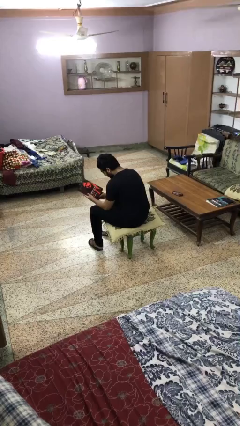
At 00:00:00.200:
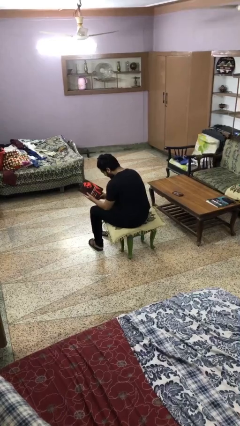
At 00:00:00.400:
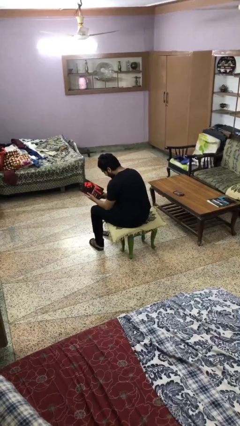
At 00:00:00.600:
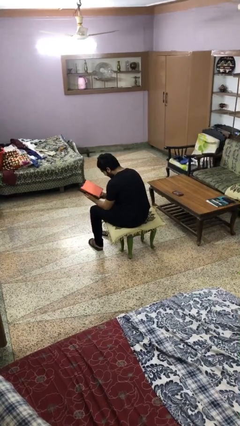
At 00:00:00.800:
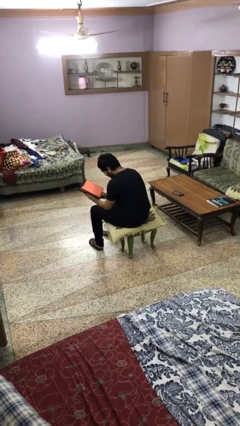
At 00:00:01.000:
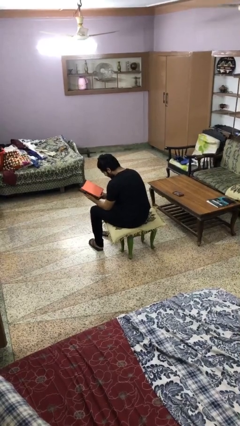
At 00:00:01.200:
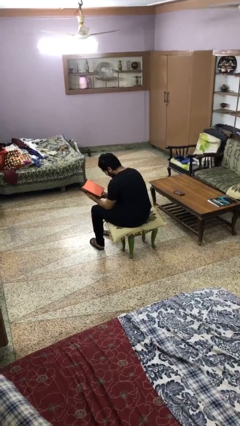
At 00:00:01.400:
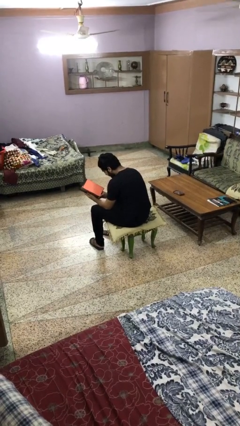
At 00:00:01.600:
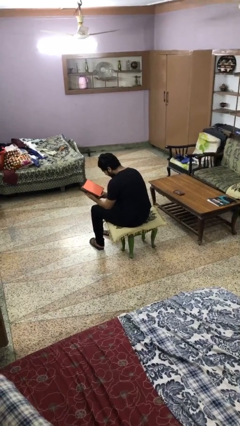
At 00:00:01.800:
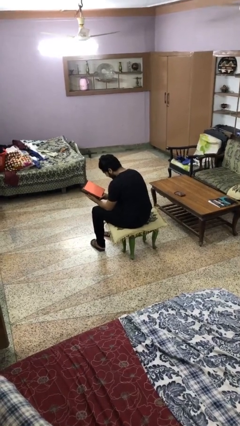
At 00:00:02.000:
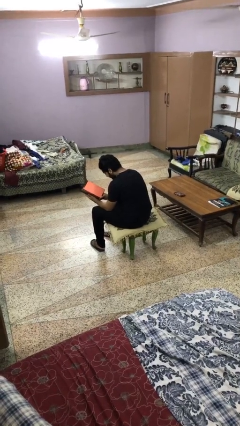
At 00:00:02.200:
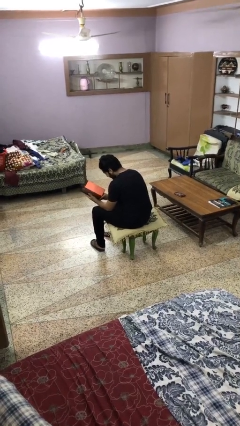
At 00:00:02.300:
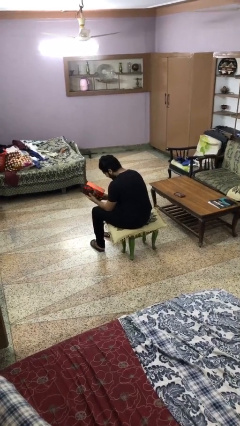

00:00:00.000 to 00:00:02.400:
person reads magazine

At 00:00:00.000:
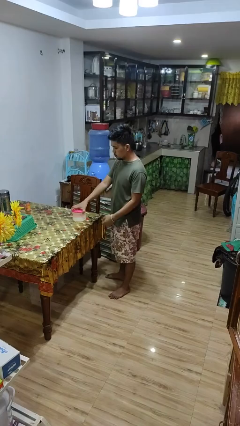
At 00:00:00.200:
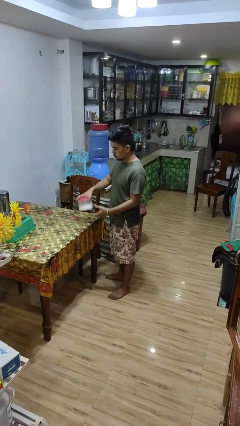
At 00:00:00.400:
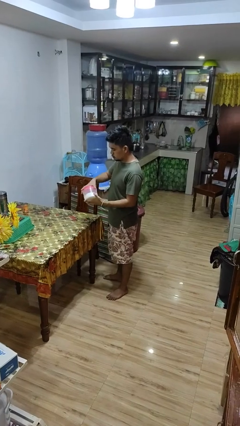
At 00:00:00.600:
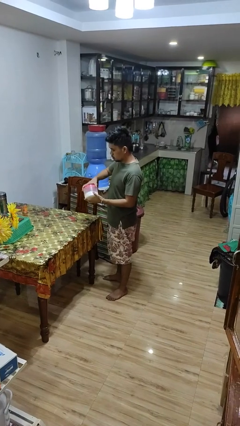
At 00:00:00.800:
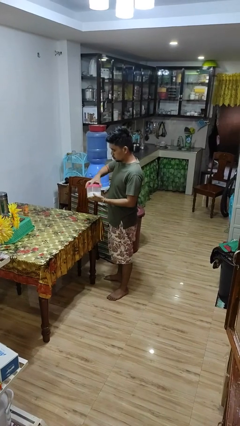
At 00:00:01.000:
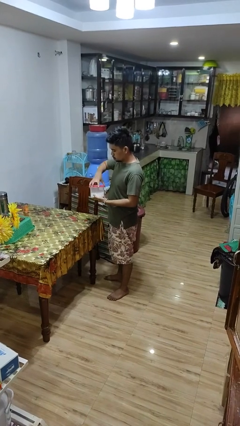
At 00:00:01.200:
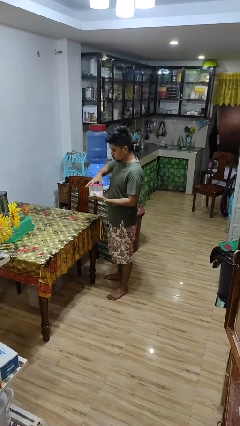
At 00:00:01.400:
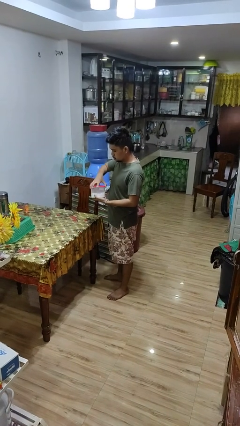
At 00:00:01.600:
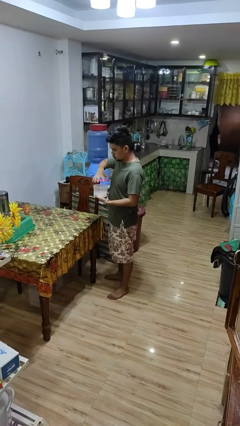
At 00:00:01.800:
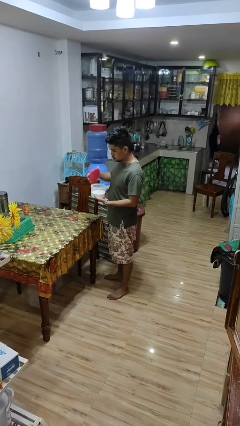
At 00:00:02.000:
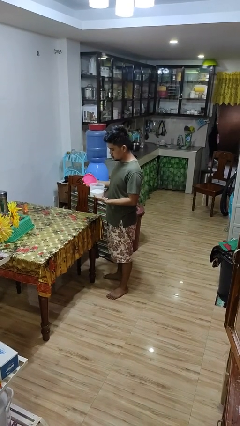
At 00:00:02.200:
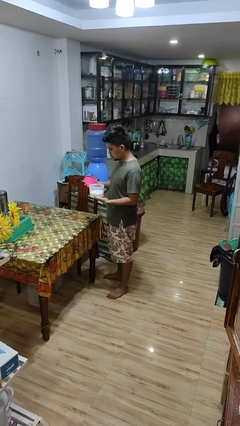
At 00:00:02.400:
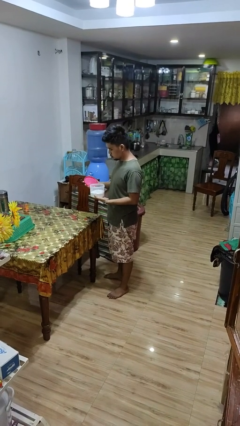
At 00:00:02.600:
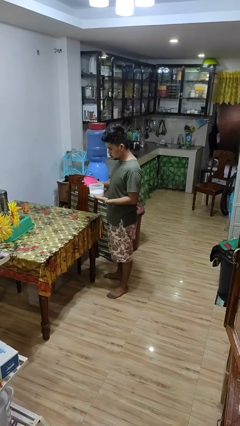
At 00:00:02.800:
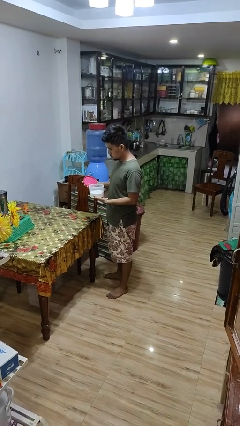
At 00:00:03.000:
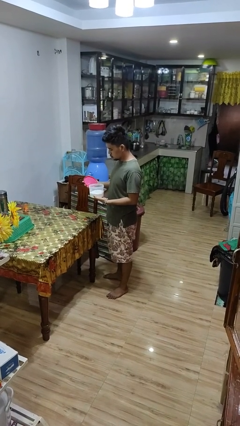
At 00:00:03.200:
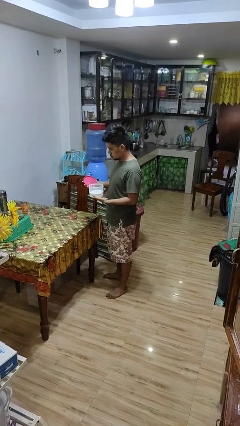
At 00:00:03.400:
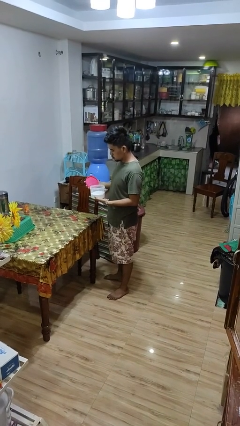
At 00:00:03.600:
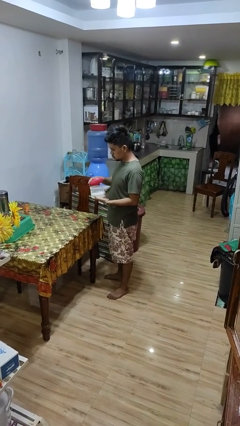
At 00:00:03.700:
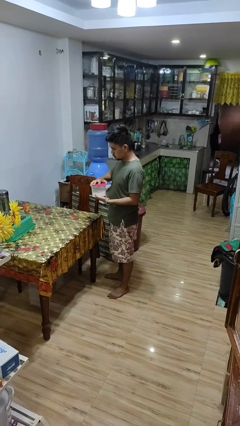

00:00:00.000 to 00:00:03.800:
person opens jar

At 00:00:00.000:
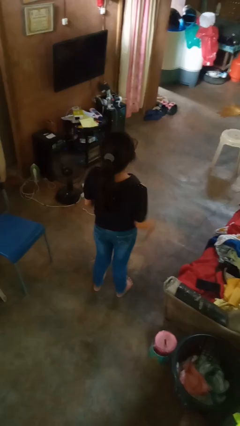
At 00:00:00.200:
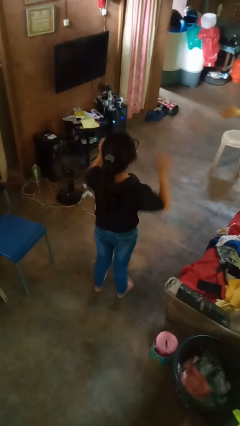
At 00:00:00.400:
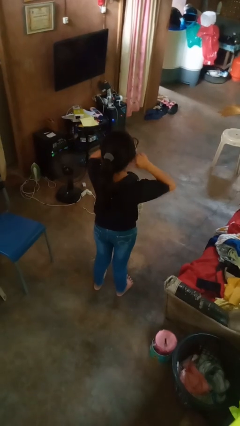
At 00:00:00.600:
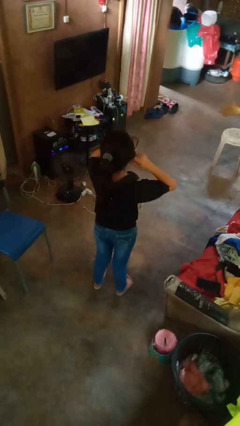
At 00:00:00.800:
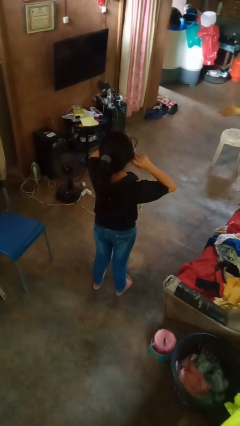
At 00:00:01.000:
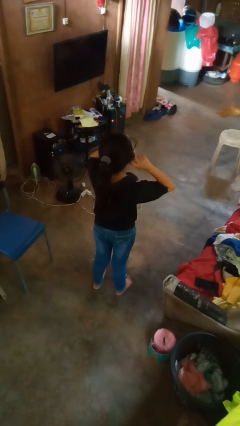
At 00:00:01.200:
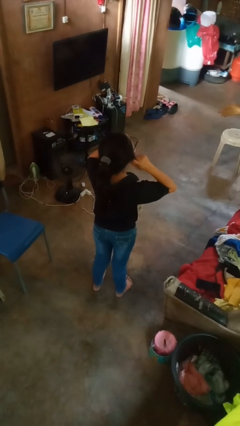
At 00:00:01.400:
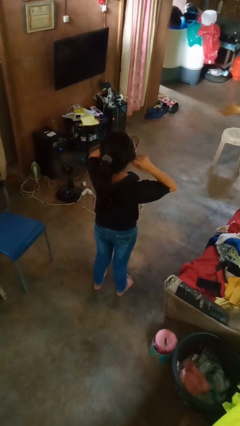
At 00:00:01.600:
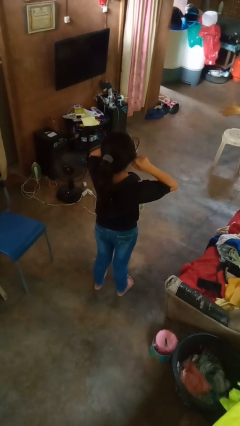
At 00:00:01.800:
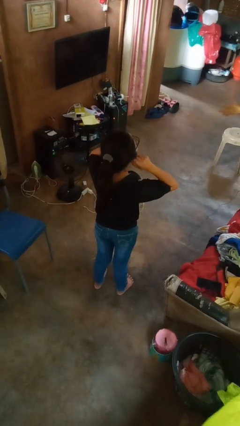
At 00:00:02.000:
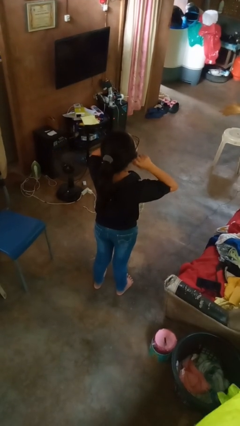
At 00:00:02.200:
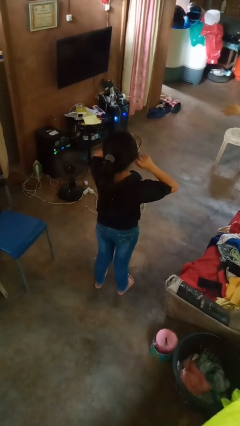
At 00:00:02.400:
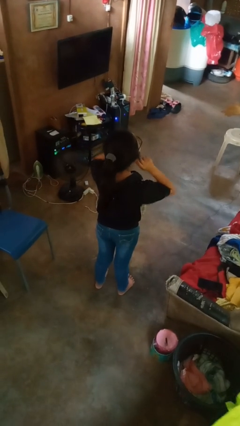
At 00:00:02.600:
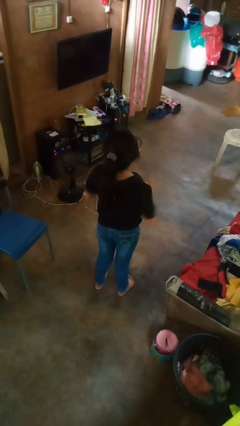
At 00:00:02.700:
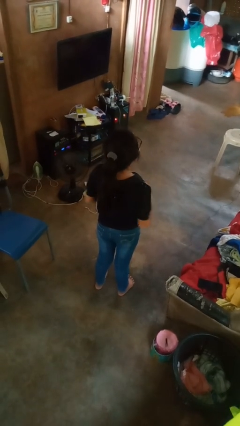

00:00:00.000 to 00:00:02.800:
person touches earlobe

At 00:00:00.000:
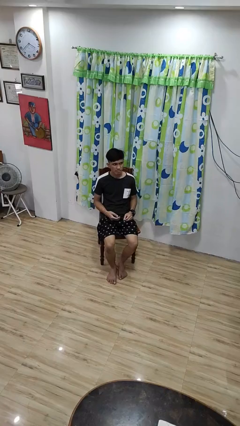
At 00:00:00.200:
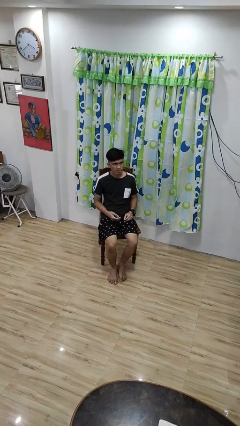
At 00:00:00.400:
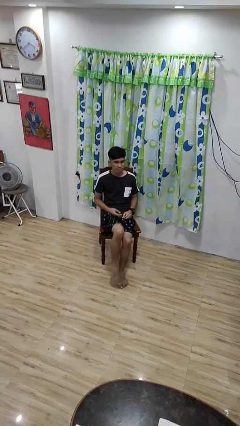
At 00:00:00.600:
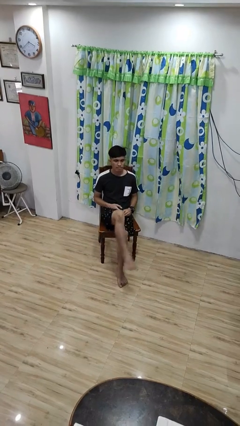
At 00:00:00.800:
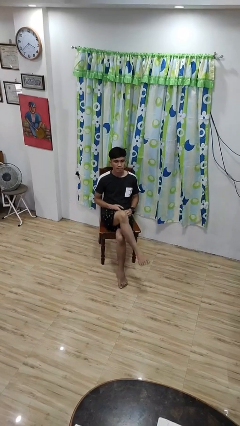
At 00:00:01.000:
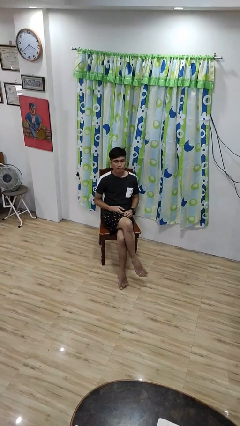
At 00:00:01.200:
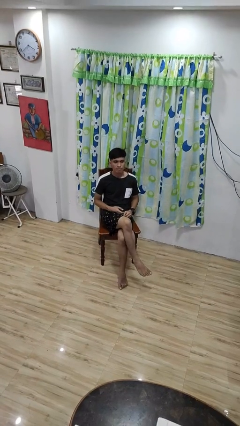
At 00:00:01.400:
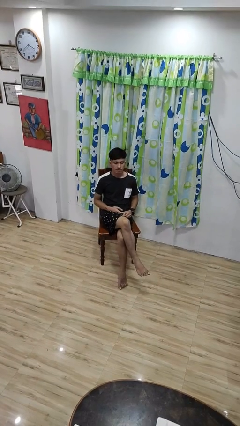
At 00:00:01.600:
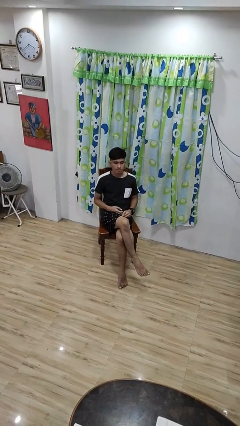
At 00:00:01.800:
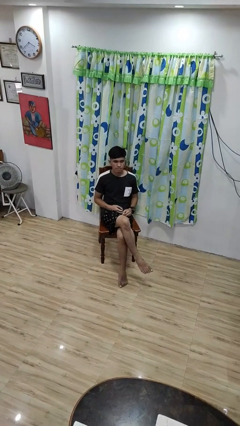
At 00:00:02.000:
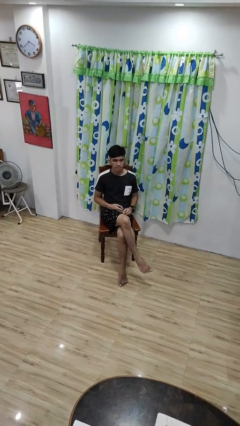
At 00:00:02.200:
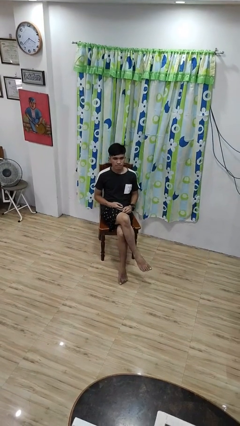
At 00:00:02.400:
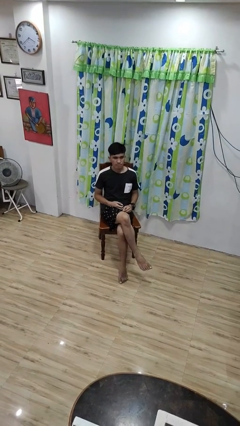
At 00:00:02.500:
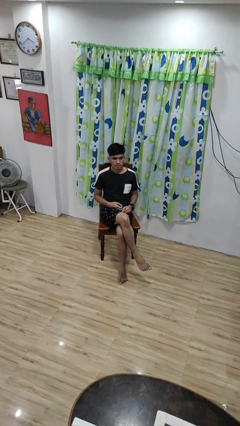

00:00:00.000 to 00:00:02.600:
person crosses legs

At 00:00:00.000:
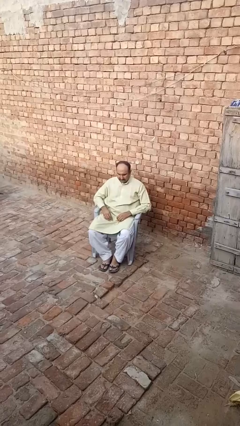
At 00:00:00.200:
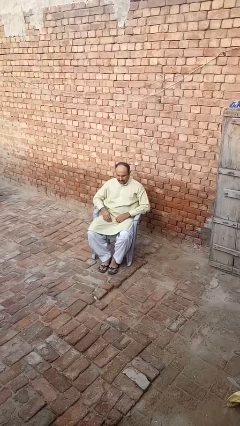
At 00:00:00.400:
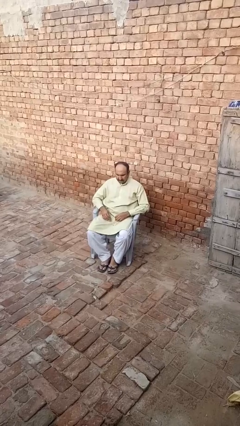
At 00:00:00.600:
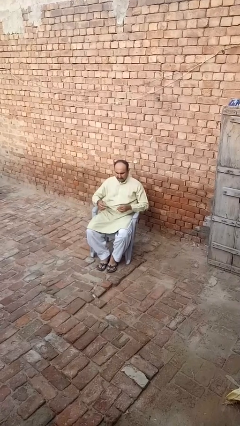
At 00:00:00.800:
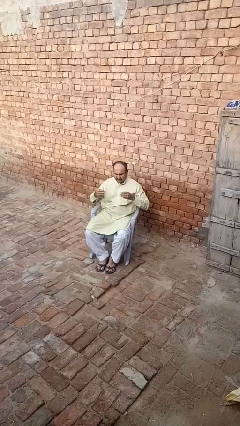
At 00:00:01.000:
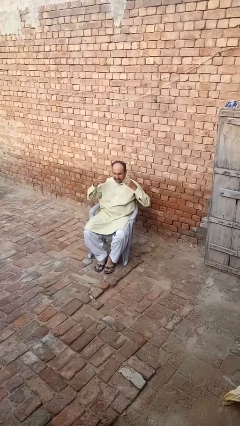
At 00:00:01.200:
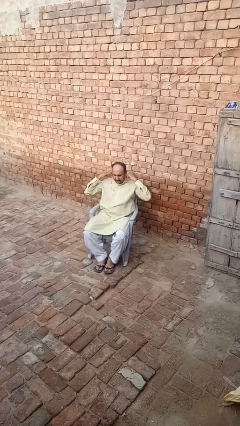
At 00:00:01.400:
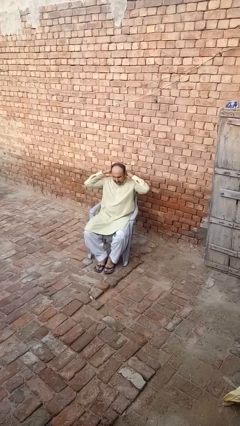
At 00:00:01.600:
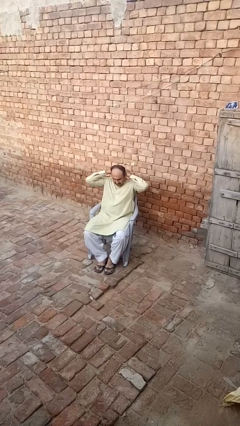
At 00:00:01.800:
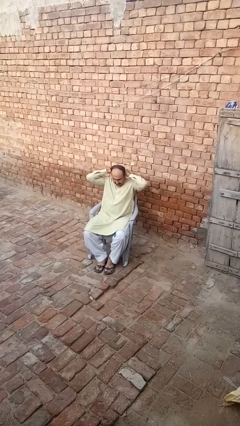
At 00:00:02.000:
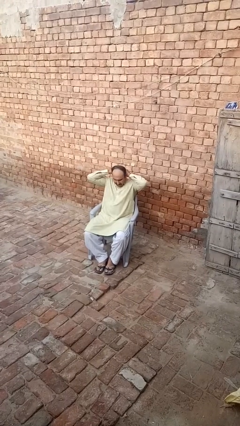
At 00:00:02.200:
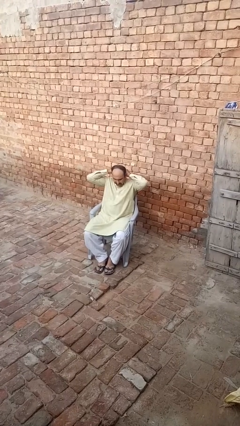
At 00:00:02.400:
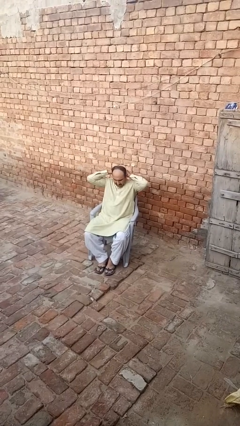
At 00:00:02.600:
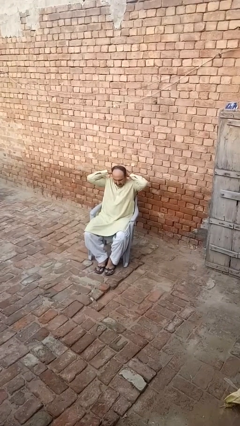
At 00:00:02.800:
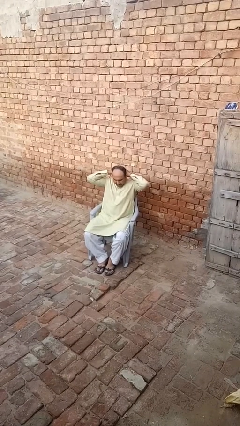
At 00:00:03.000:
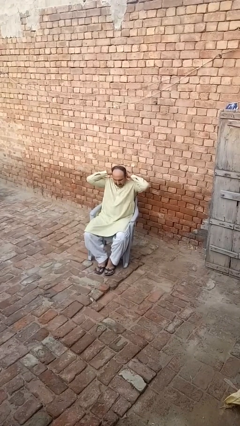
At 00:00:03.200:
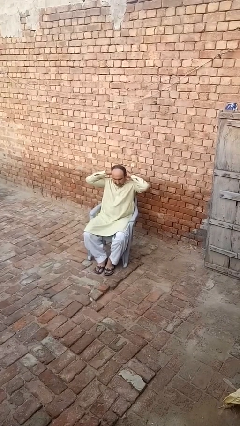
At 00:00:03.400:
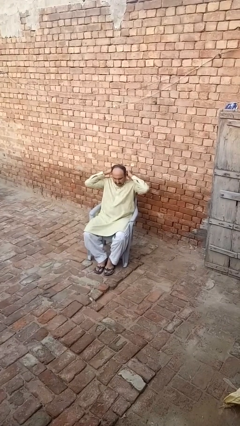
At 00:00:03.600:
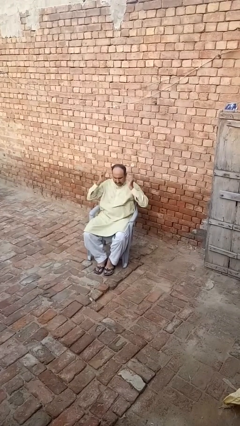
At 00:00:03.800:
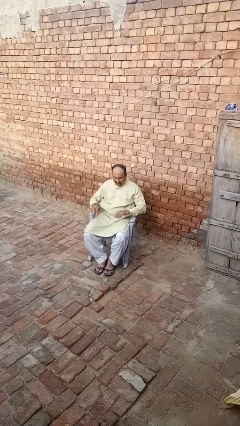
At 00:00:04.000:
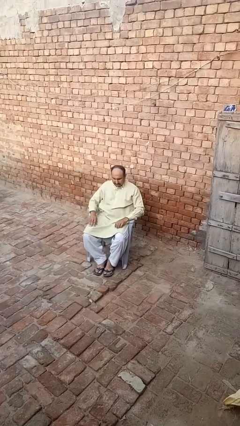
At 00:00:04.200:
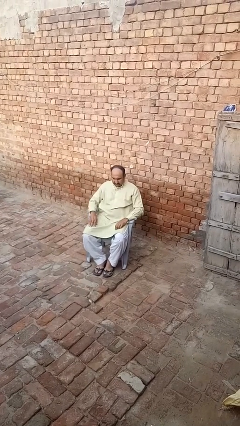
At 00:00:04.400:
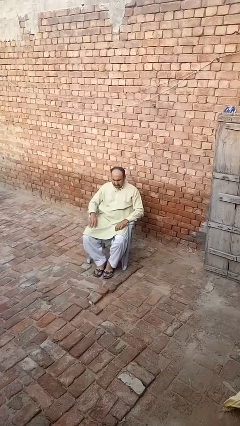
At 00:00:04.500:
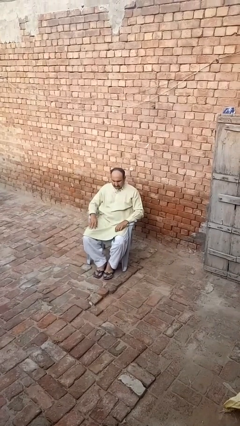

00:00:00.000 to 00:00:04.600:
person puts on necklace

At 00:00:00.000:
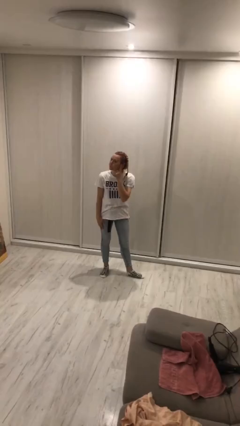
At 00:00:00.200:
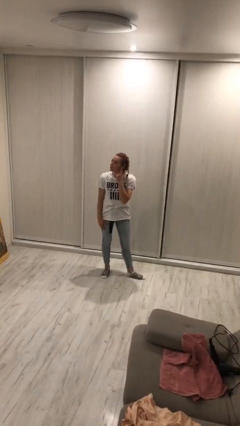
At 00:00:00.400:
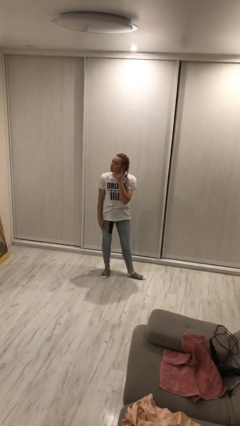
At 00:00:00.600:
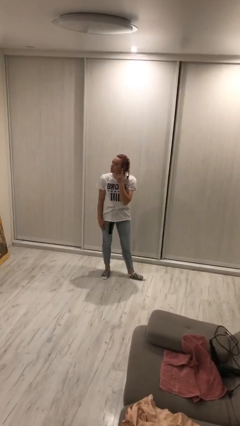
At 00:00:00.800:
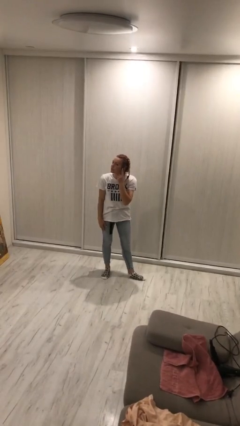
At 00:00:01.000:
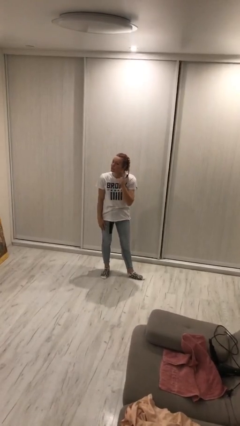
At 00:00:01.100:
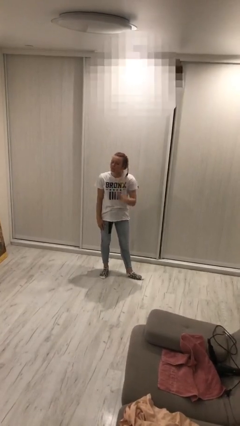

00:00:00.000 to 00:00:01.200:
person gestures listen closely
